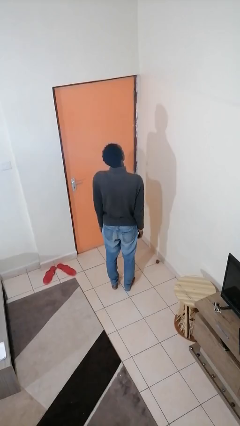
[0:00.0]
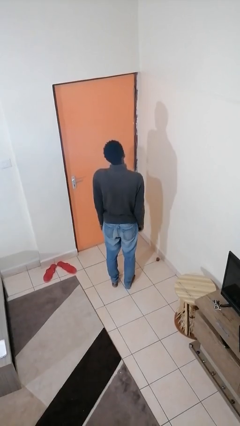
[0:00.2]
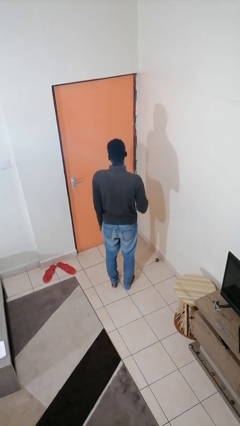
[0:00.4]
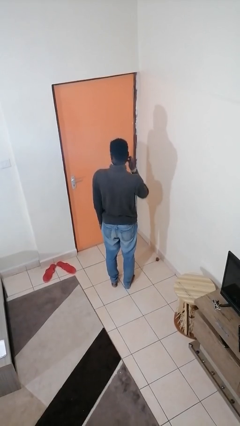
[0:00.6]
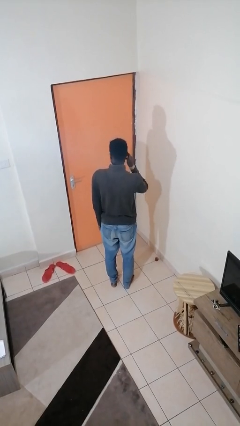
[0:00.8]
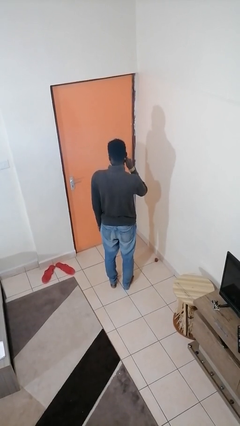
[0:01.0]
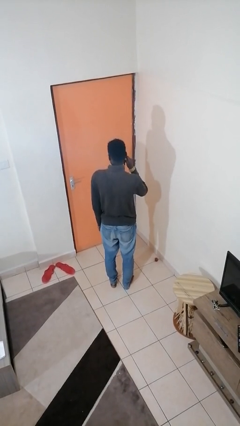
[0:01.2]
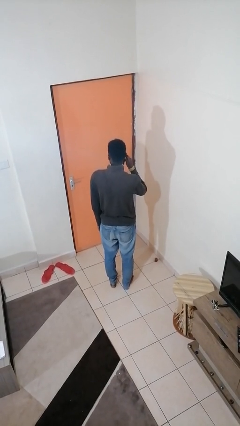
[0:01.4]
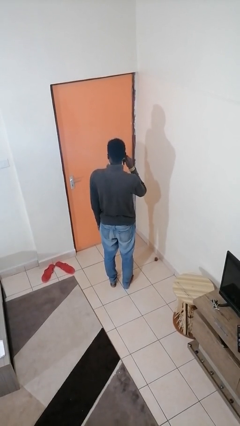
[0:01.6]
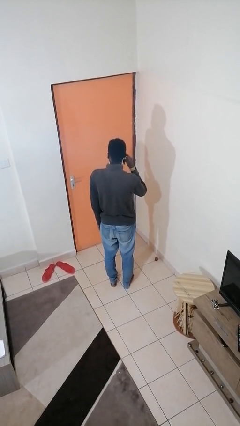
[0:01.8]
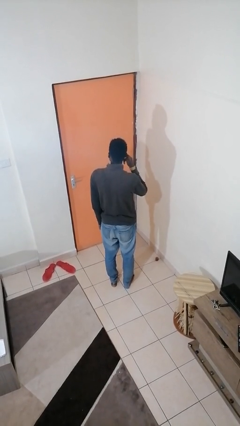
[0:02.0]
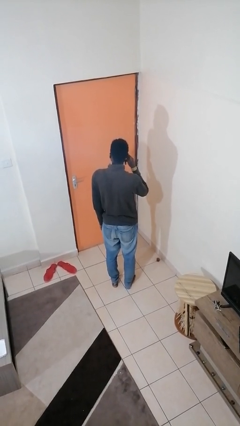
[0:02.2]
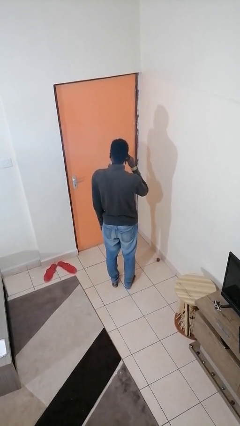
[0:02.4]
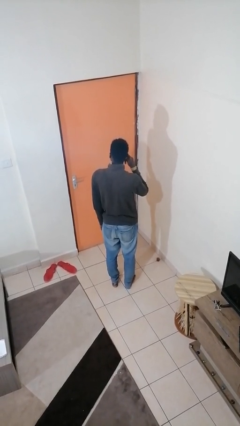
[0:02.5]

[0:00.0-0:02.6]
person touches earlobe

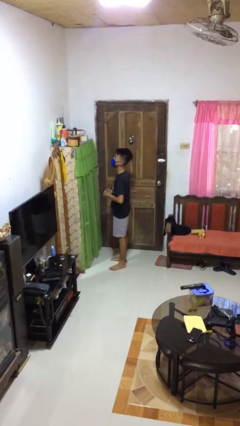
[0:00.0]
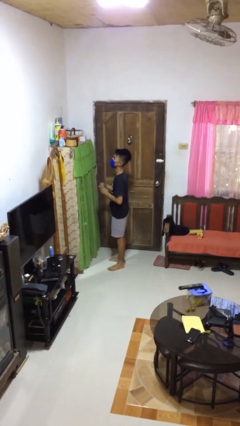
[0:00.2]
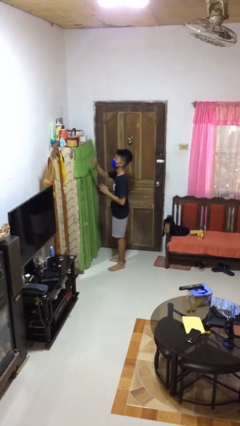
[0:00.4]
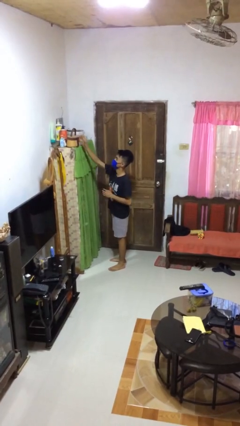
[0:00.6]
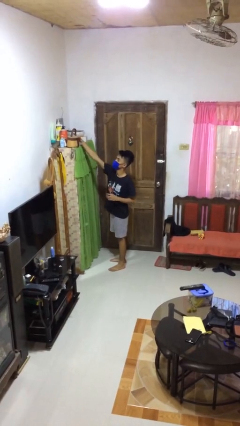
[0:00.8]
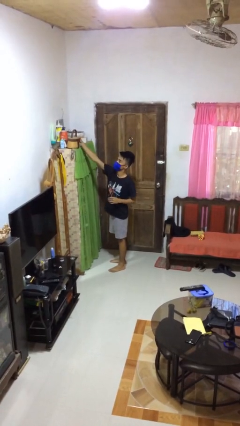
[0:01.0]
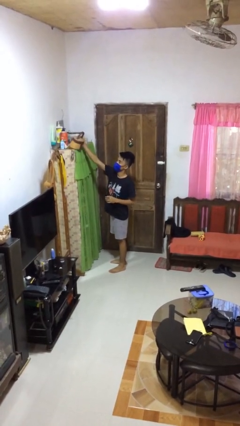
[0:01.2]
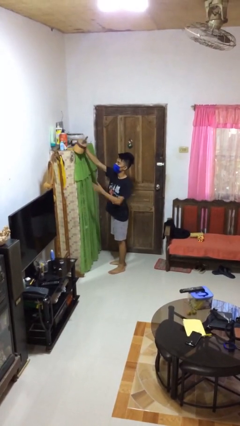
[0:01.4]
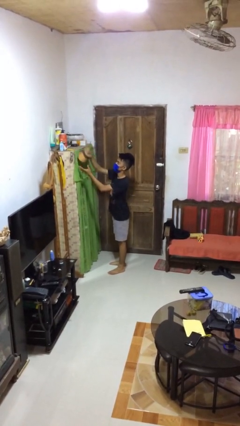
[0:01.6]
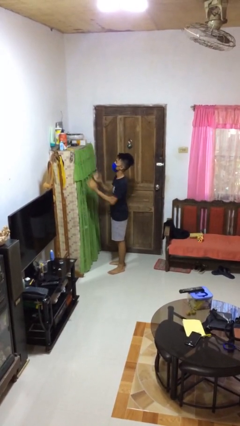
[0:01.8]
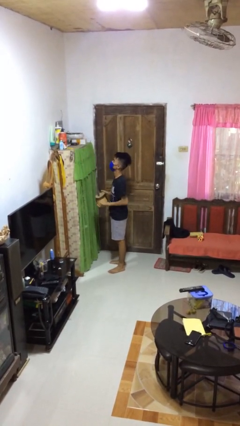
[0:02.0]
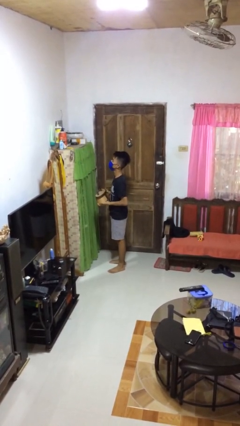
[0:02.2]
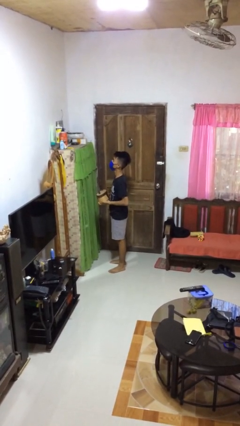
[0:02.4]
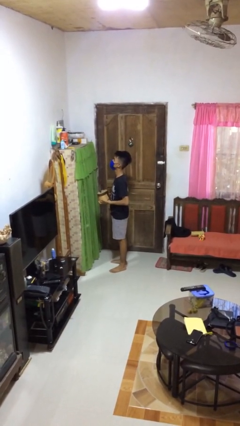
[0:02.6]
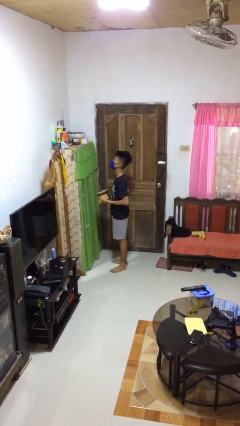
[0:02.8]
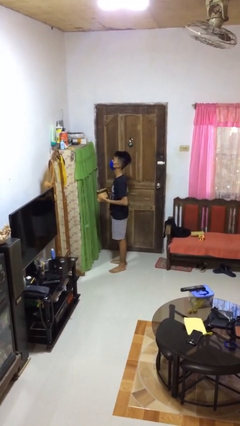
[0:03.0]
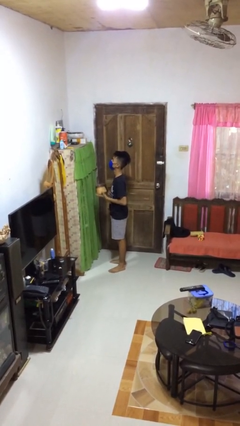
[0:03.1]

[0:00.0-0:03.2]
person picks up object from shelf

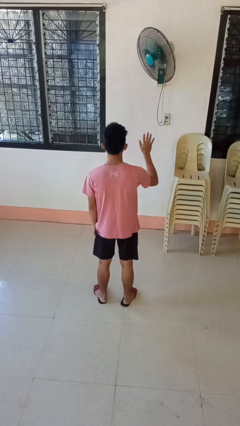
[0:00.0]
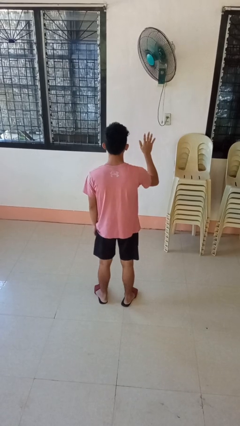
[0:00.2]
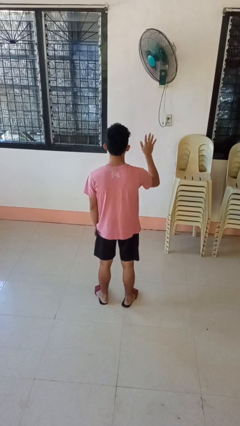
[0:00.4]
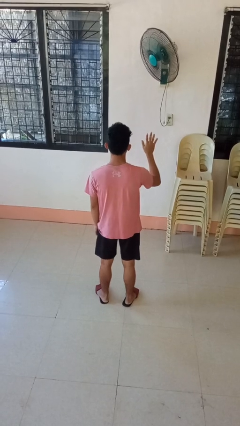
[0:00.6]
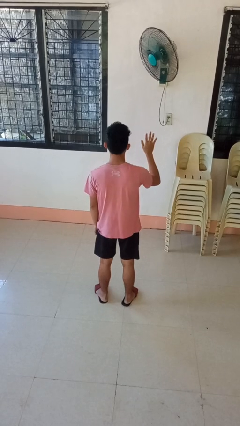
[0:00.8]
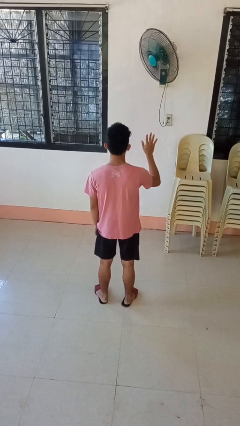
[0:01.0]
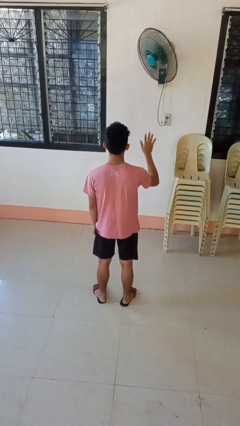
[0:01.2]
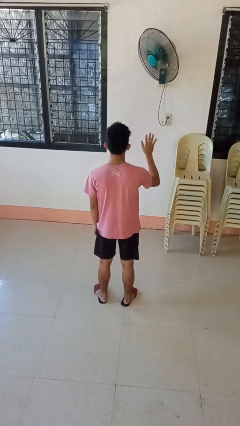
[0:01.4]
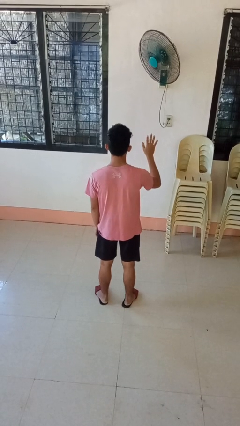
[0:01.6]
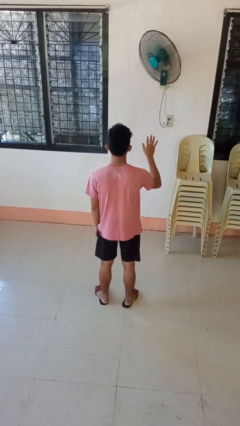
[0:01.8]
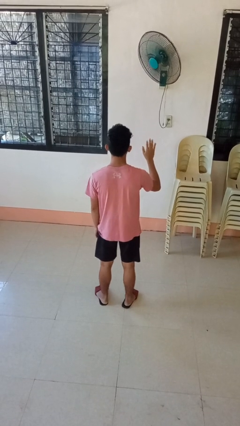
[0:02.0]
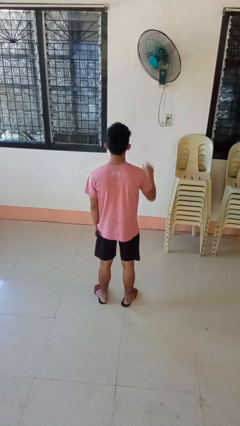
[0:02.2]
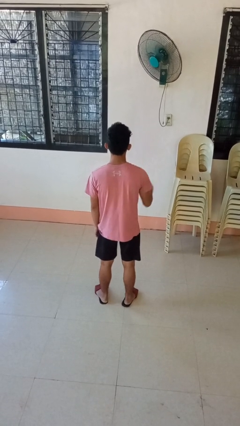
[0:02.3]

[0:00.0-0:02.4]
person gestures number five

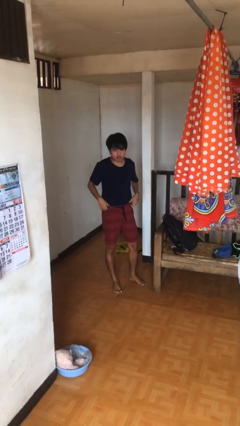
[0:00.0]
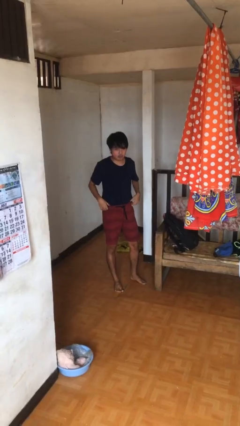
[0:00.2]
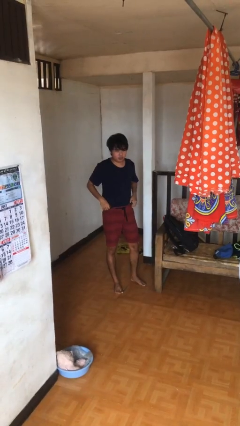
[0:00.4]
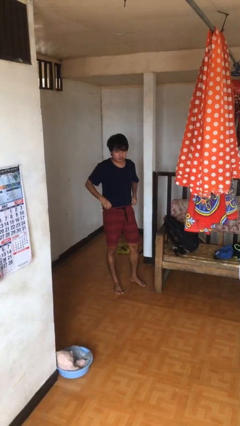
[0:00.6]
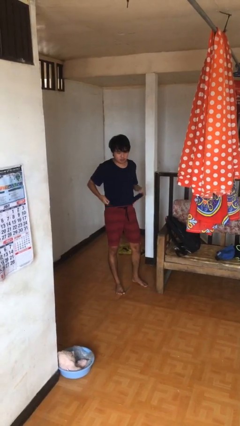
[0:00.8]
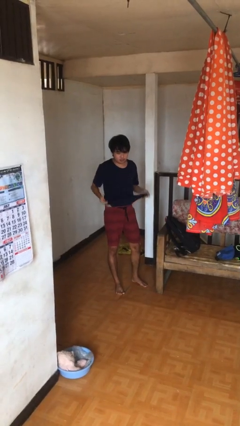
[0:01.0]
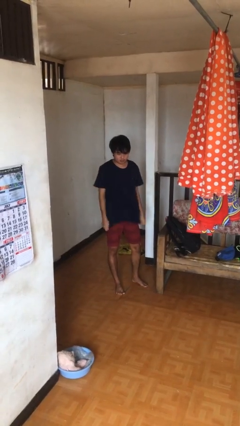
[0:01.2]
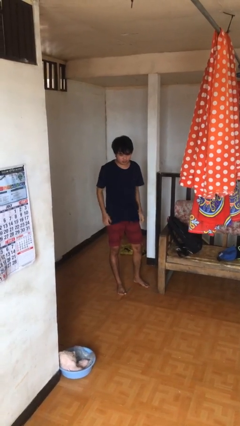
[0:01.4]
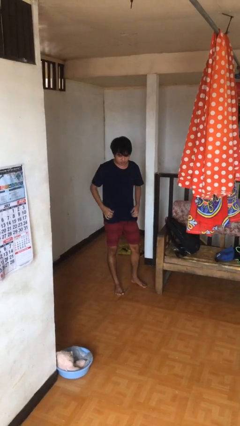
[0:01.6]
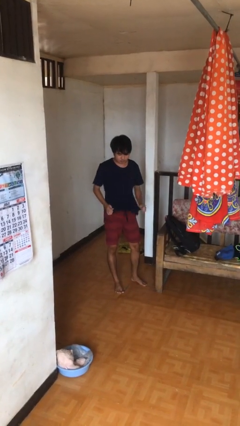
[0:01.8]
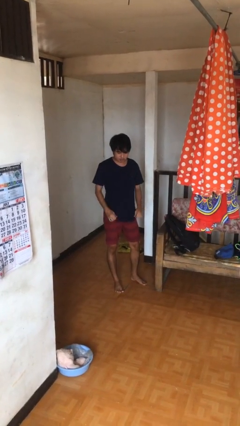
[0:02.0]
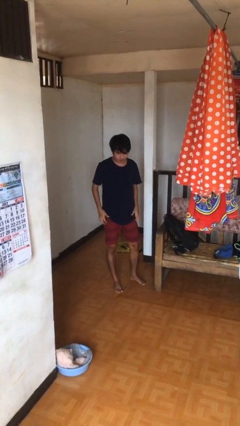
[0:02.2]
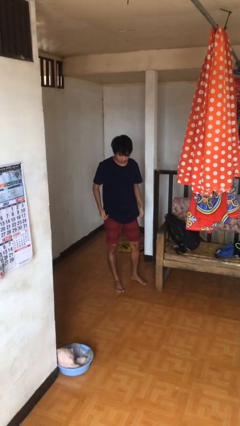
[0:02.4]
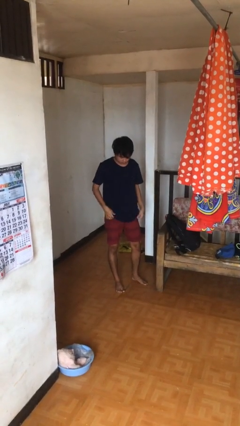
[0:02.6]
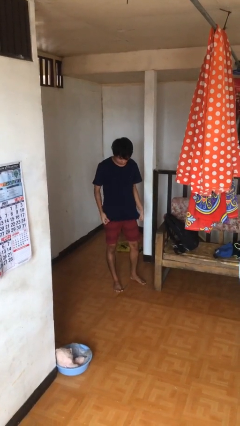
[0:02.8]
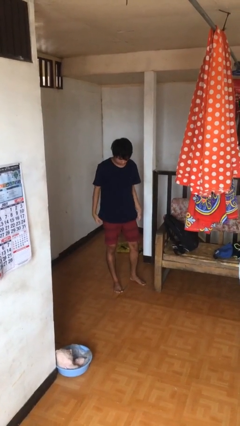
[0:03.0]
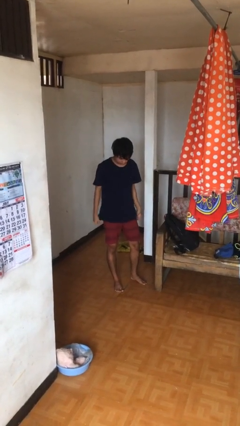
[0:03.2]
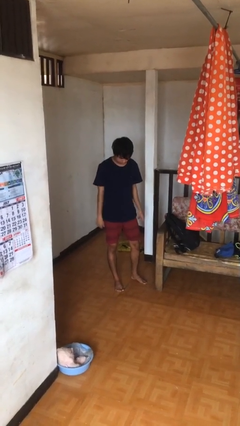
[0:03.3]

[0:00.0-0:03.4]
person untucks shirt

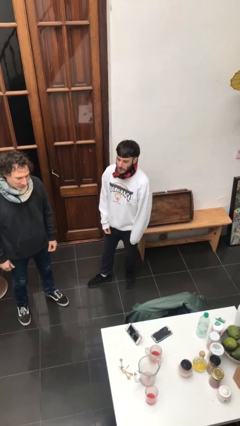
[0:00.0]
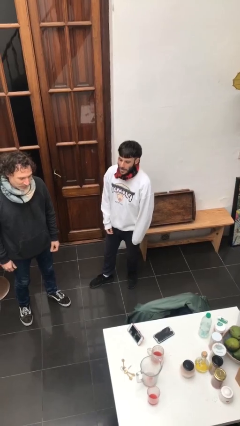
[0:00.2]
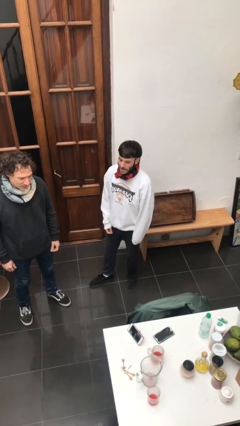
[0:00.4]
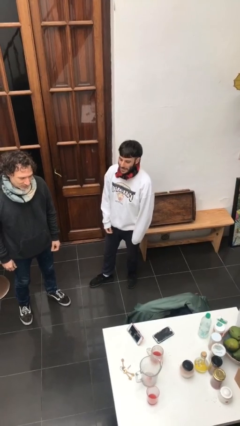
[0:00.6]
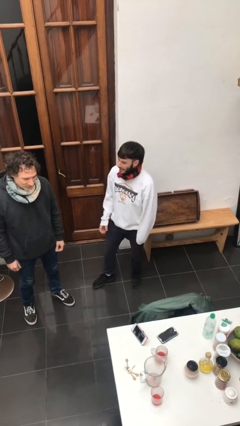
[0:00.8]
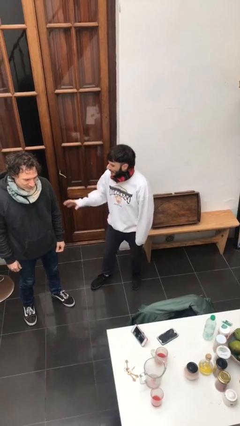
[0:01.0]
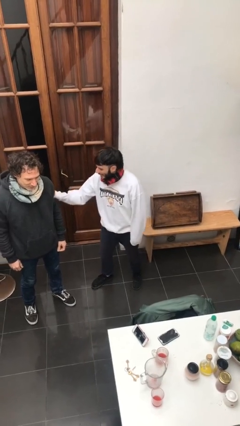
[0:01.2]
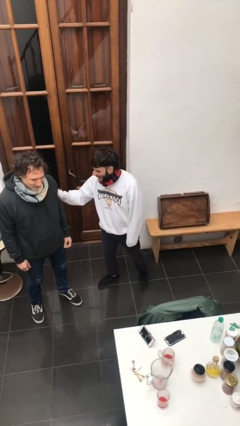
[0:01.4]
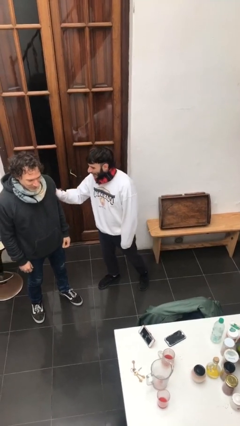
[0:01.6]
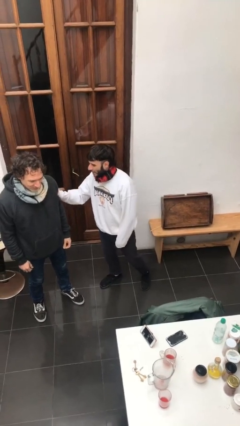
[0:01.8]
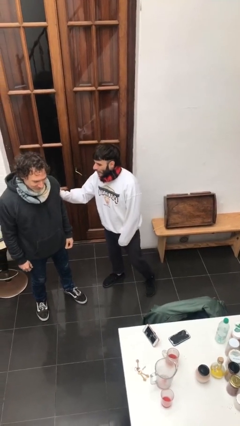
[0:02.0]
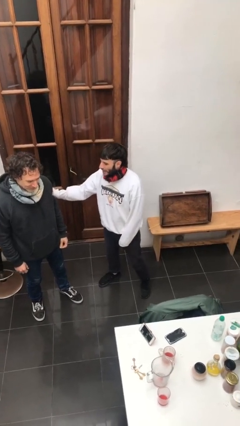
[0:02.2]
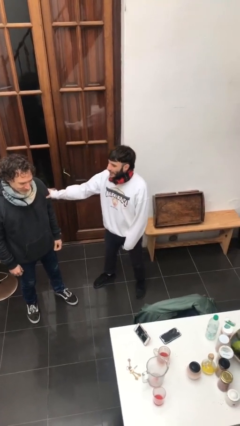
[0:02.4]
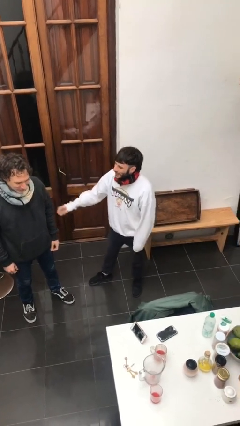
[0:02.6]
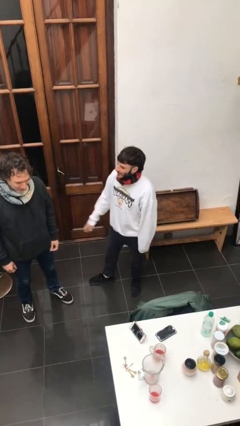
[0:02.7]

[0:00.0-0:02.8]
person grabs person by bicep

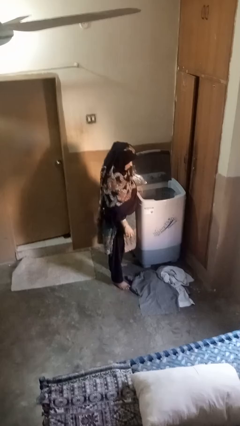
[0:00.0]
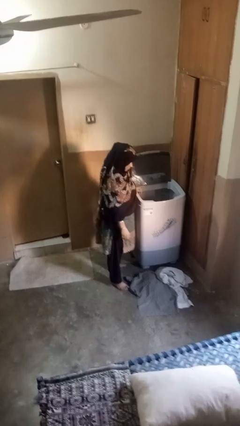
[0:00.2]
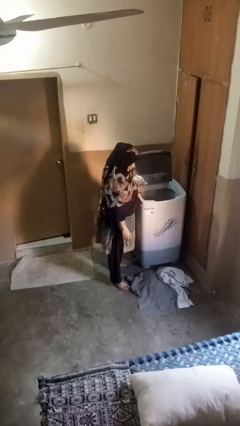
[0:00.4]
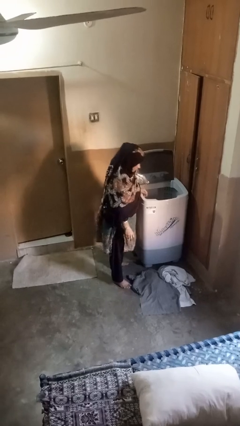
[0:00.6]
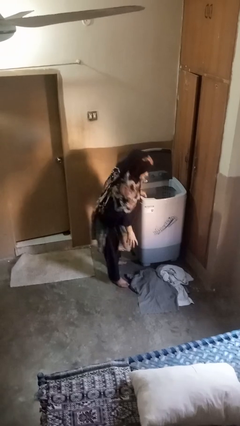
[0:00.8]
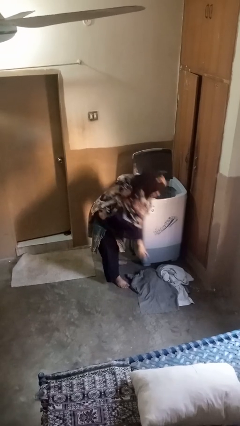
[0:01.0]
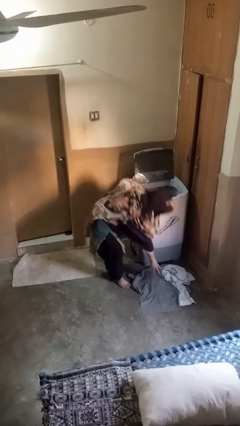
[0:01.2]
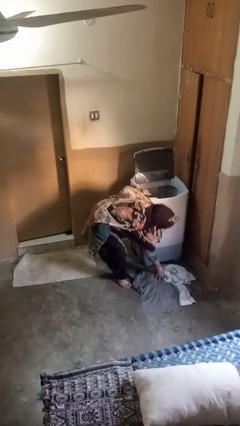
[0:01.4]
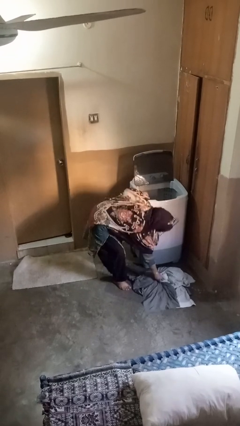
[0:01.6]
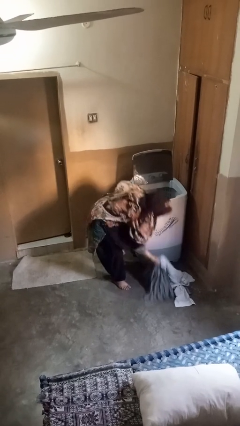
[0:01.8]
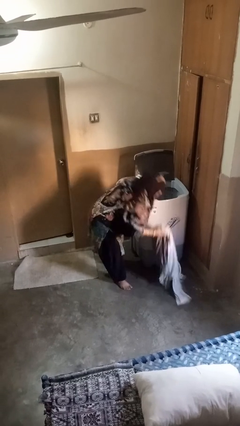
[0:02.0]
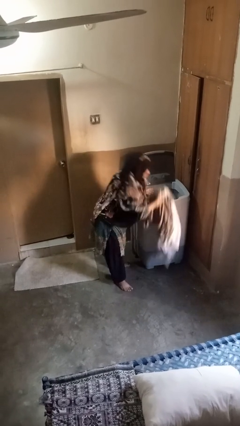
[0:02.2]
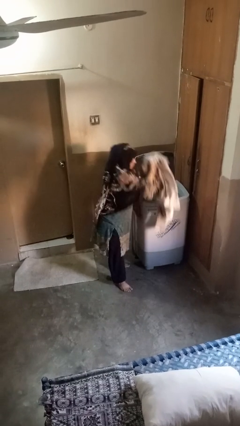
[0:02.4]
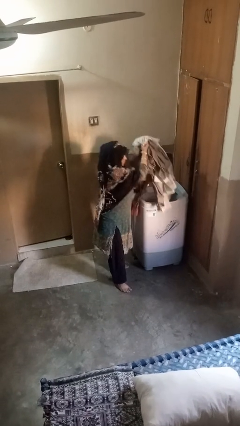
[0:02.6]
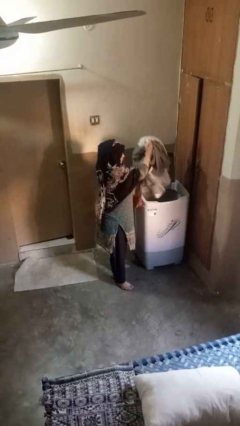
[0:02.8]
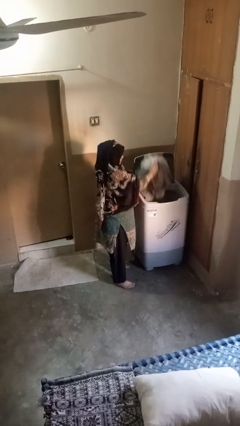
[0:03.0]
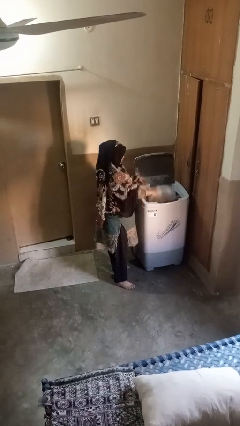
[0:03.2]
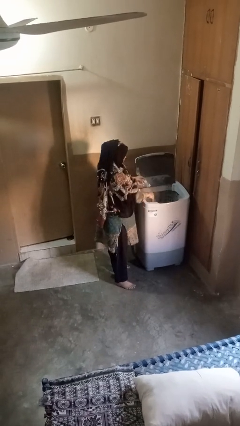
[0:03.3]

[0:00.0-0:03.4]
person loads clotheswasher
